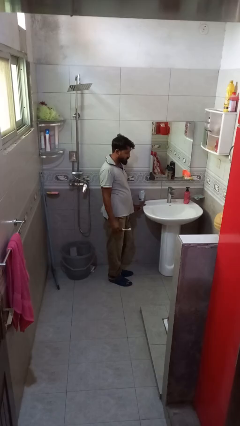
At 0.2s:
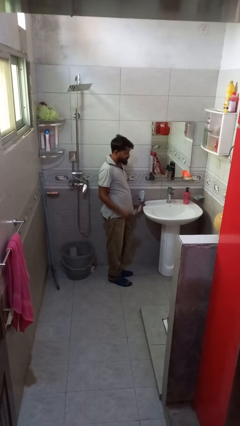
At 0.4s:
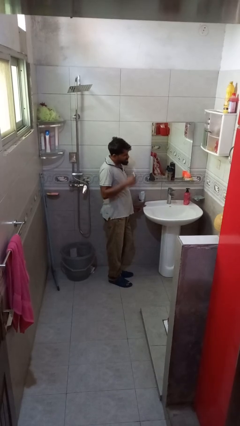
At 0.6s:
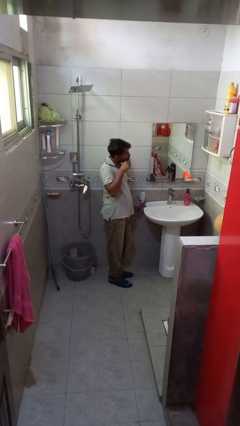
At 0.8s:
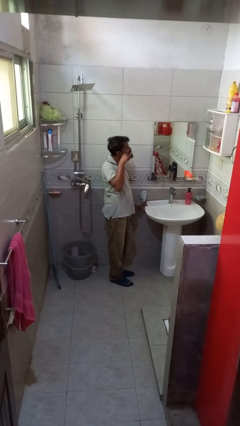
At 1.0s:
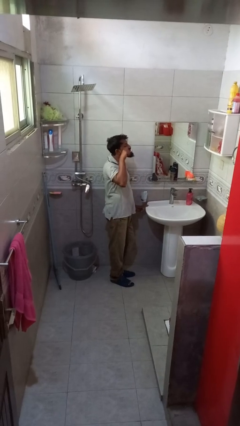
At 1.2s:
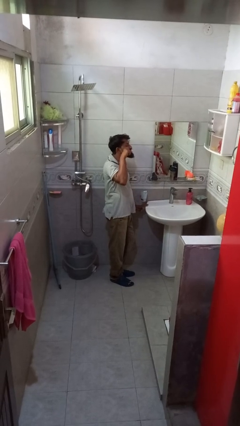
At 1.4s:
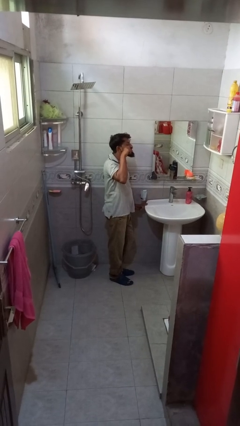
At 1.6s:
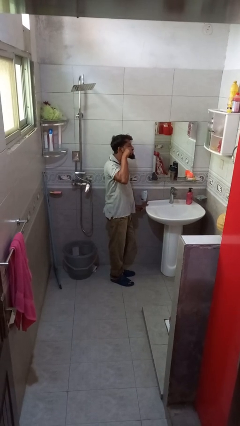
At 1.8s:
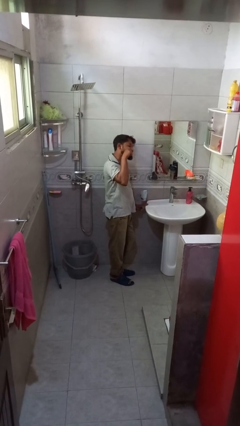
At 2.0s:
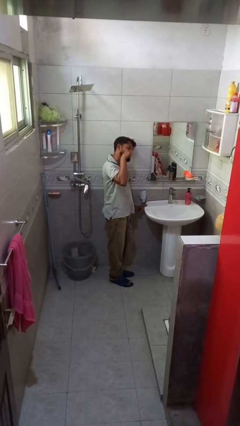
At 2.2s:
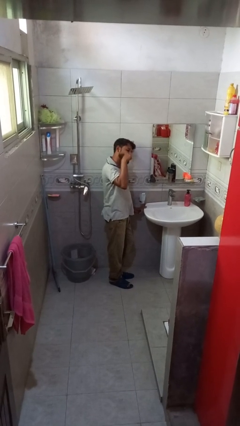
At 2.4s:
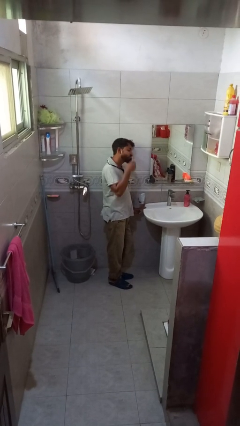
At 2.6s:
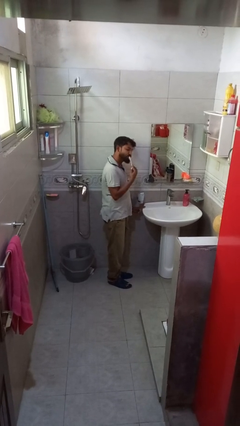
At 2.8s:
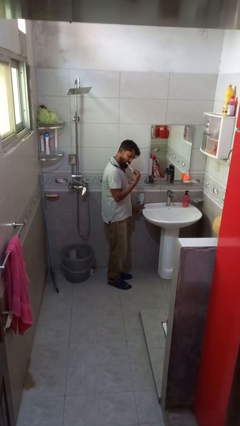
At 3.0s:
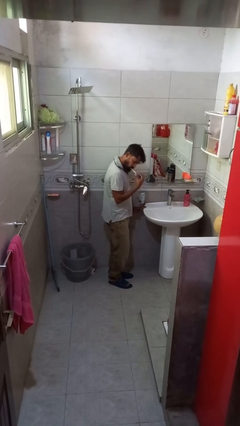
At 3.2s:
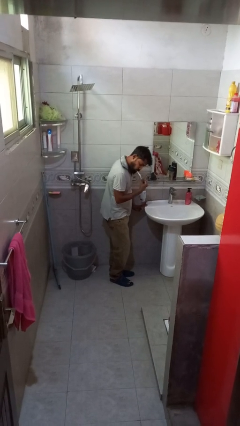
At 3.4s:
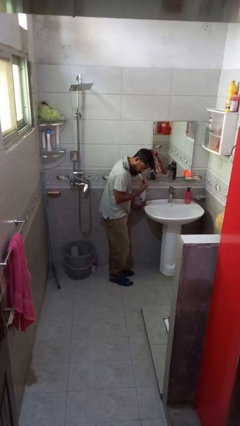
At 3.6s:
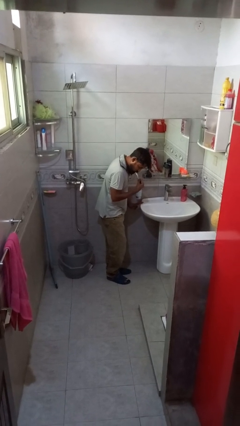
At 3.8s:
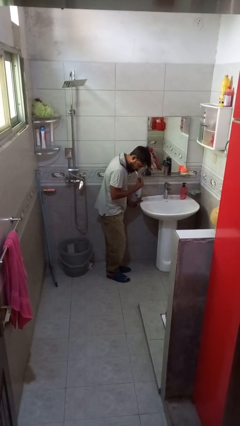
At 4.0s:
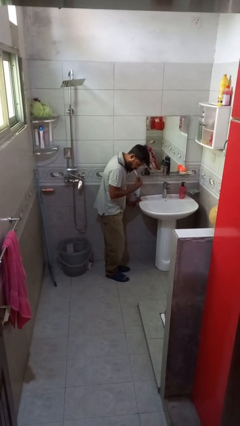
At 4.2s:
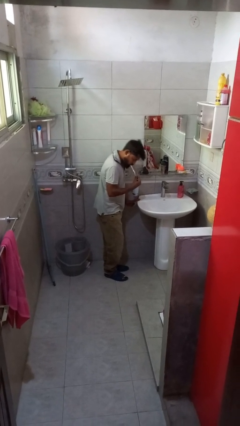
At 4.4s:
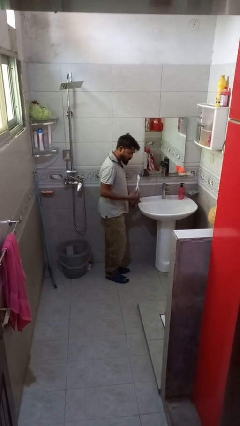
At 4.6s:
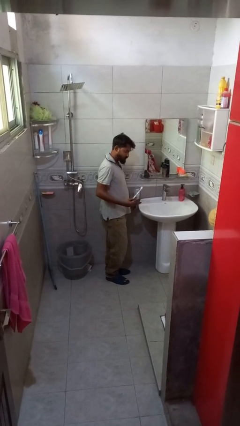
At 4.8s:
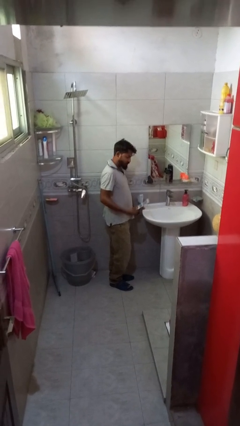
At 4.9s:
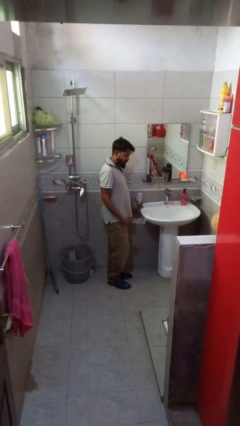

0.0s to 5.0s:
person brushes teeth

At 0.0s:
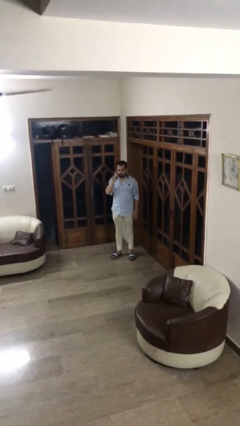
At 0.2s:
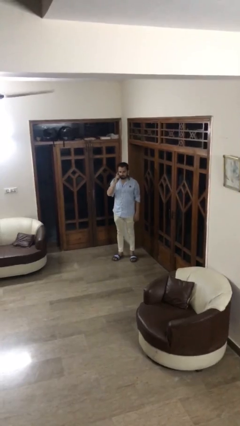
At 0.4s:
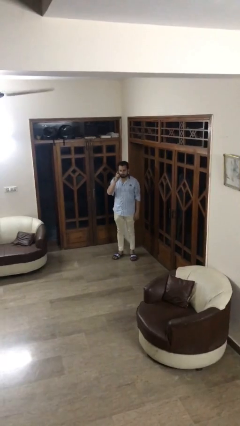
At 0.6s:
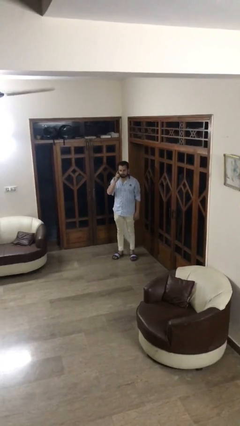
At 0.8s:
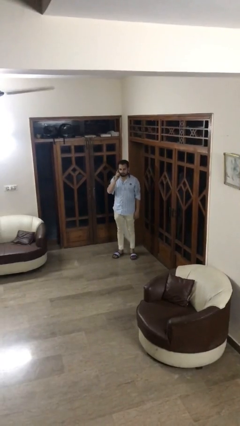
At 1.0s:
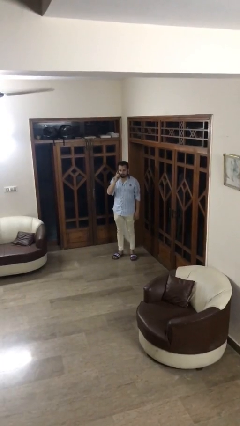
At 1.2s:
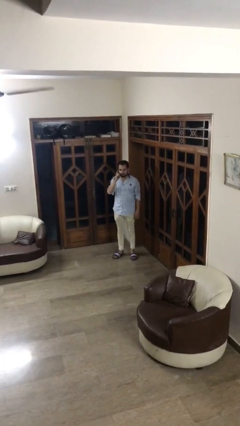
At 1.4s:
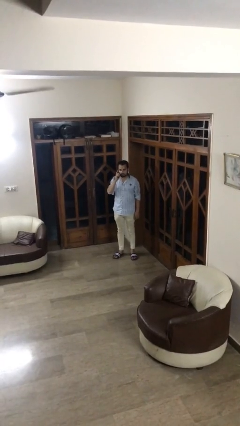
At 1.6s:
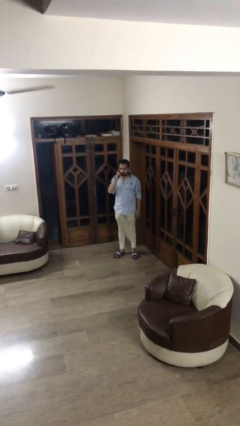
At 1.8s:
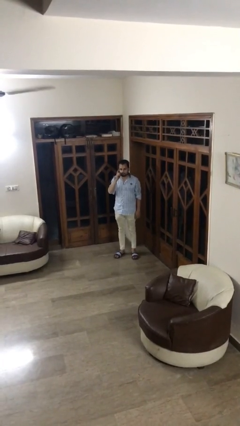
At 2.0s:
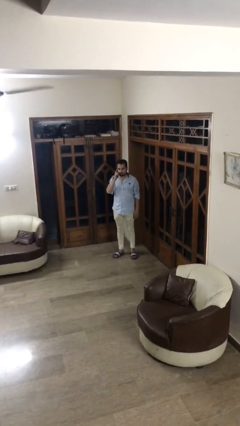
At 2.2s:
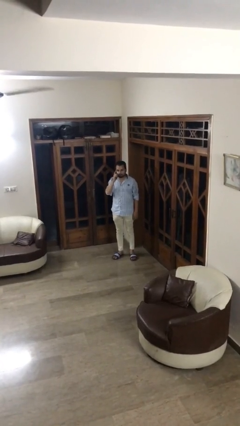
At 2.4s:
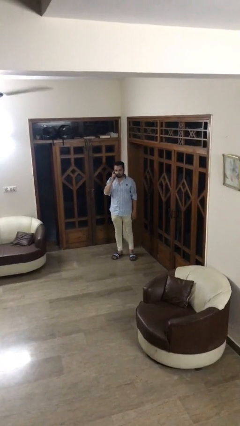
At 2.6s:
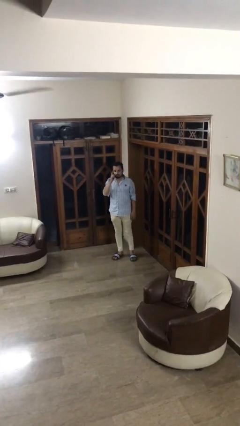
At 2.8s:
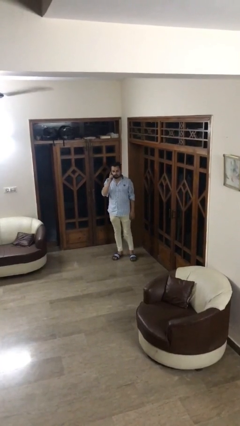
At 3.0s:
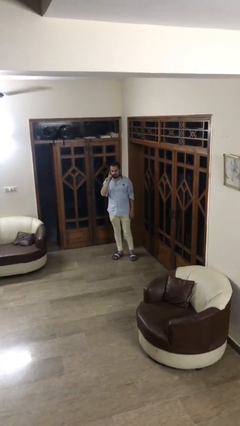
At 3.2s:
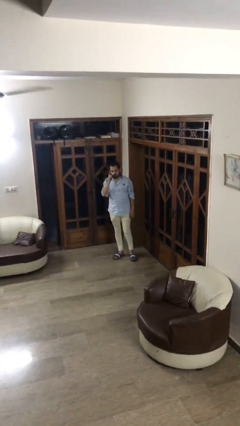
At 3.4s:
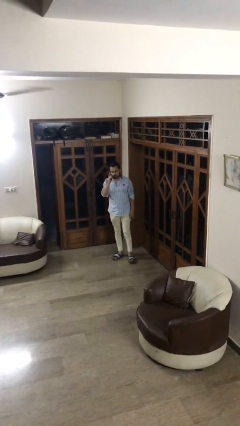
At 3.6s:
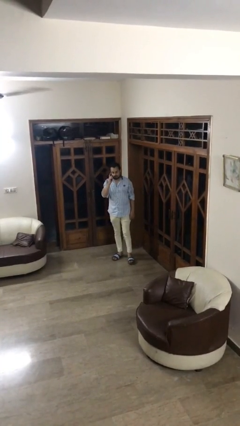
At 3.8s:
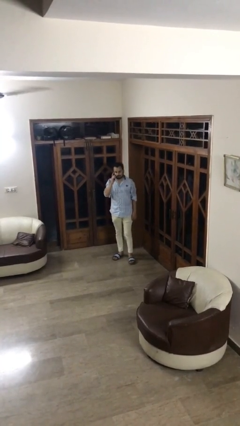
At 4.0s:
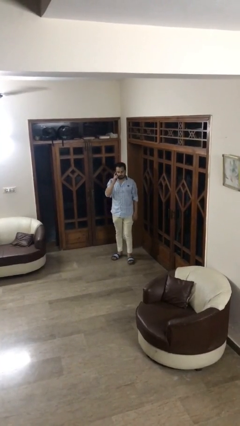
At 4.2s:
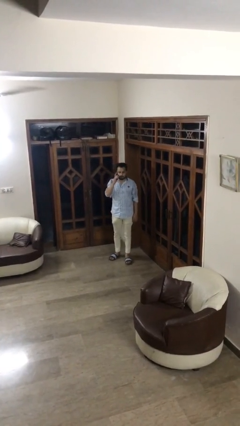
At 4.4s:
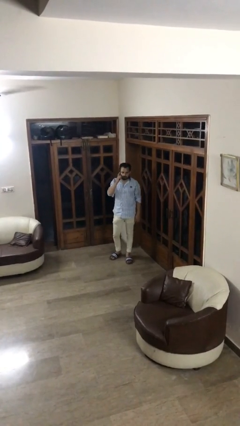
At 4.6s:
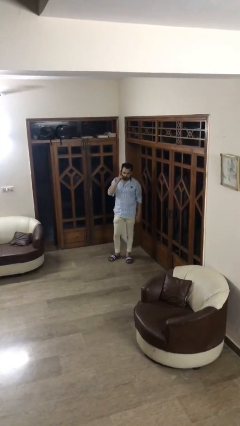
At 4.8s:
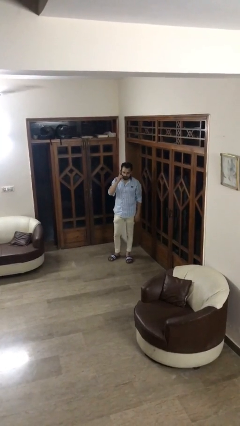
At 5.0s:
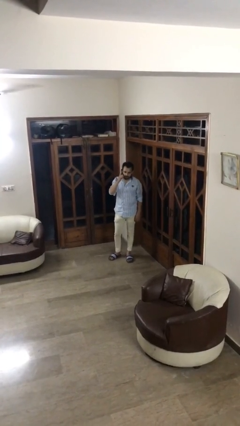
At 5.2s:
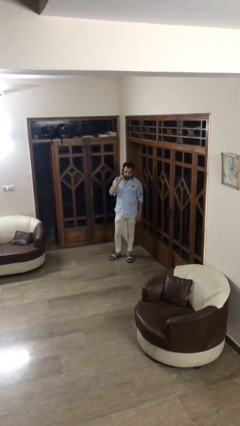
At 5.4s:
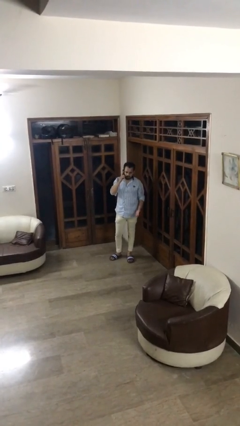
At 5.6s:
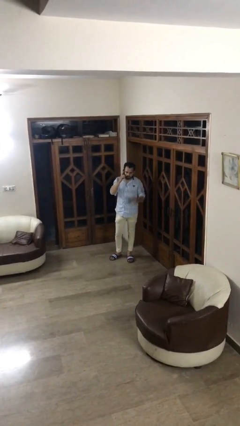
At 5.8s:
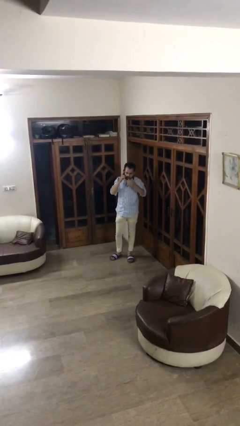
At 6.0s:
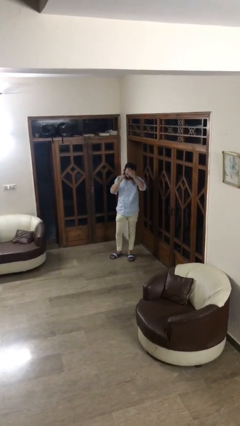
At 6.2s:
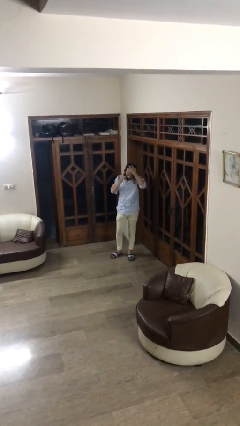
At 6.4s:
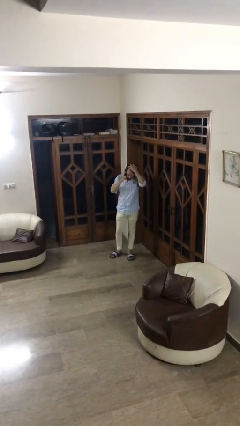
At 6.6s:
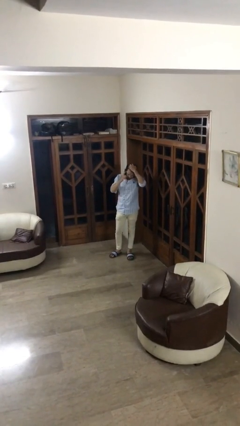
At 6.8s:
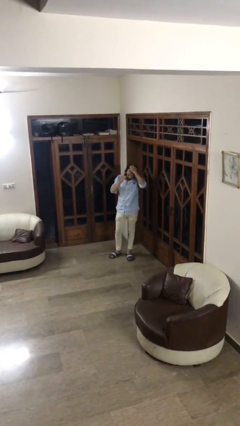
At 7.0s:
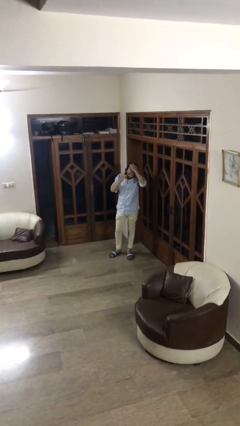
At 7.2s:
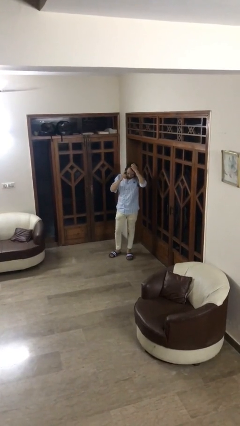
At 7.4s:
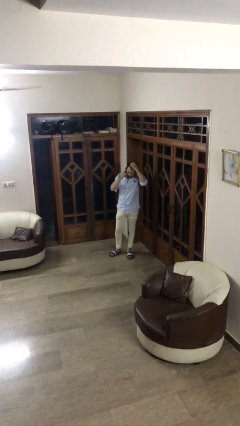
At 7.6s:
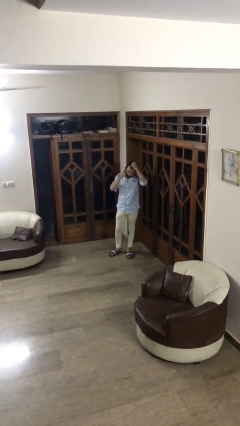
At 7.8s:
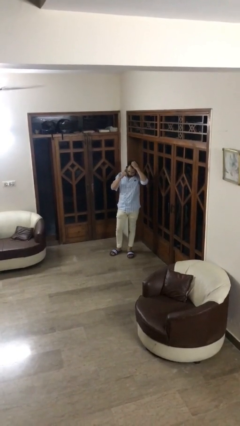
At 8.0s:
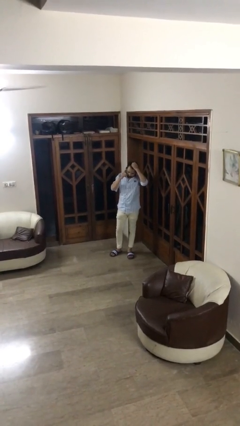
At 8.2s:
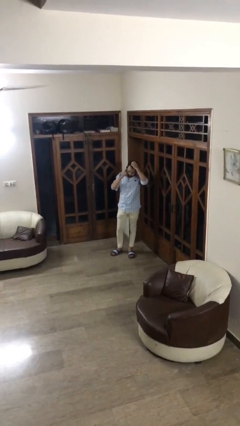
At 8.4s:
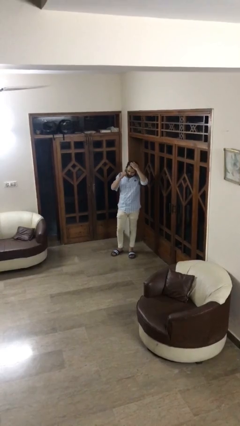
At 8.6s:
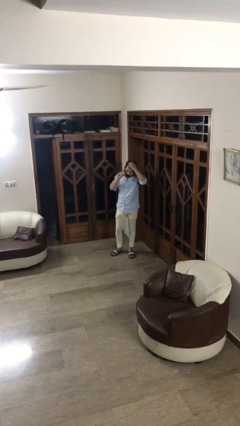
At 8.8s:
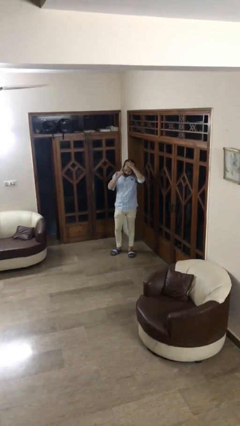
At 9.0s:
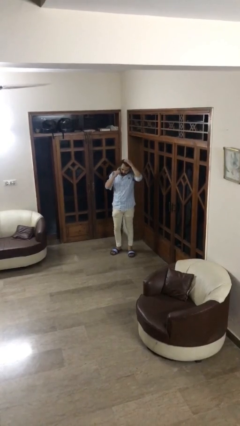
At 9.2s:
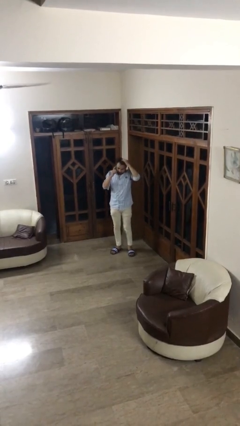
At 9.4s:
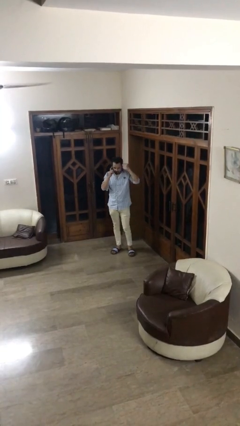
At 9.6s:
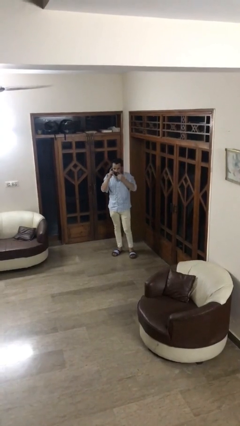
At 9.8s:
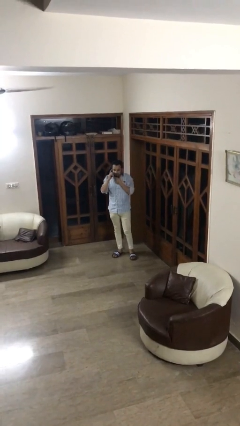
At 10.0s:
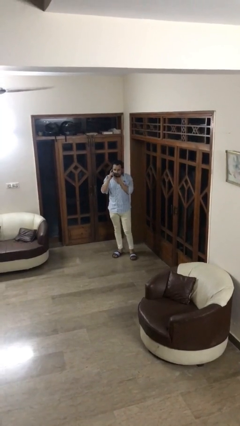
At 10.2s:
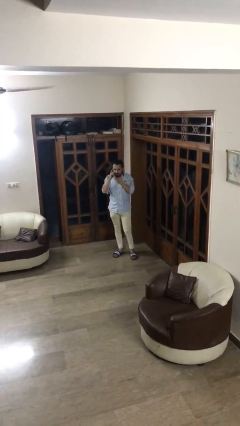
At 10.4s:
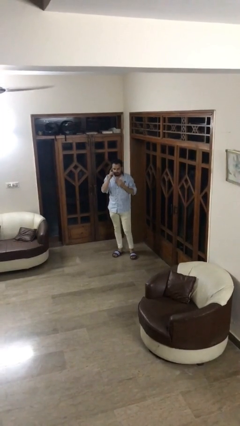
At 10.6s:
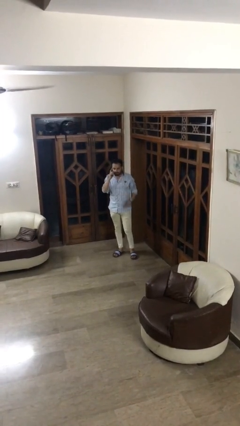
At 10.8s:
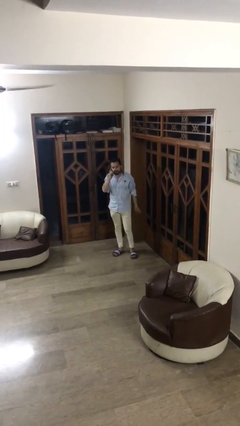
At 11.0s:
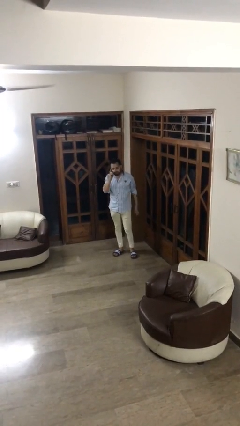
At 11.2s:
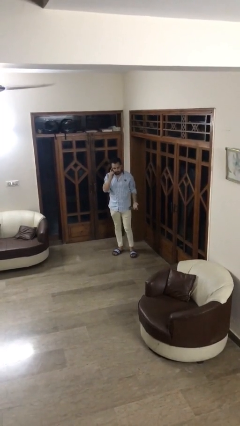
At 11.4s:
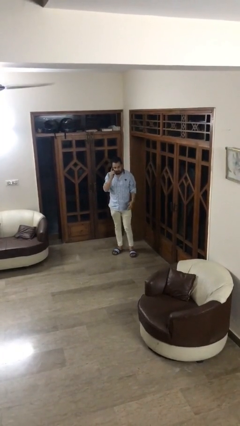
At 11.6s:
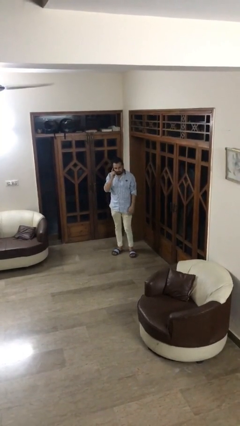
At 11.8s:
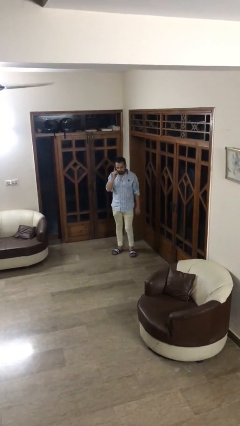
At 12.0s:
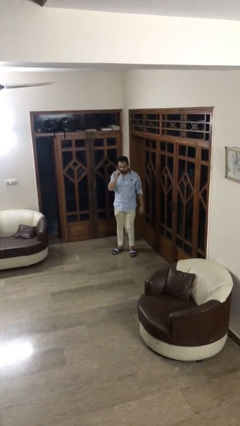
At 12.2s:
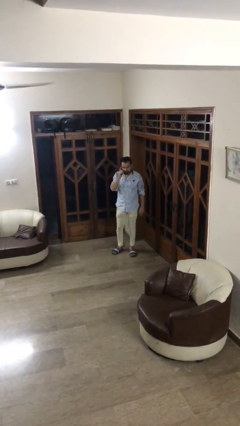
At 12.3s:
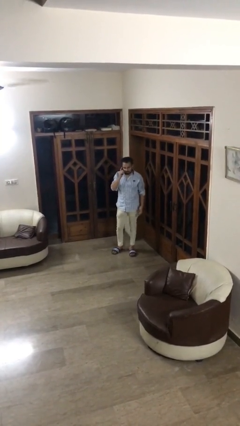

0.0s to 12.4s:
person talks on phone

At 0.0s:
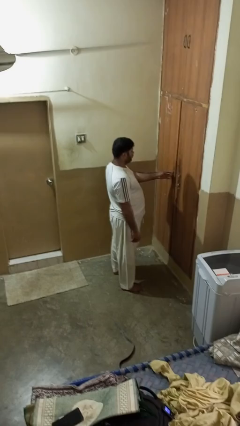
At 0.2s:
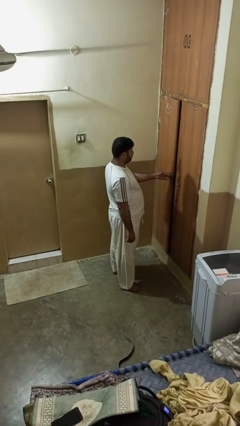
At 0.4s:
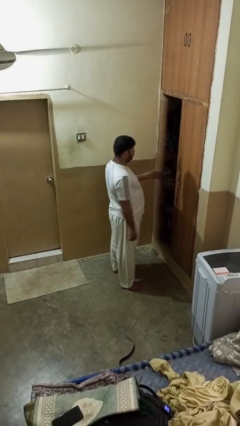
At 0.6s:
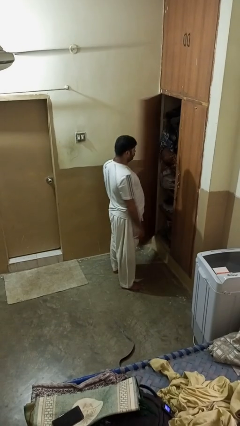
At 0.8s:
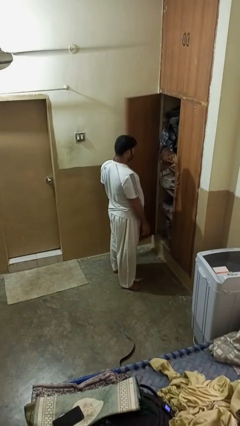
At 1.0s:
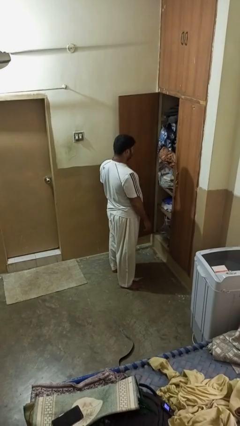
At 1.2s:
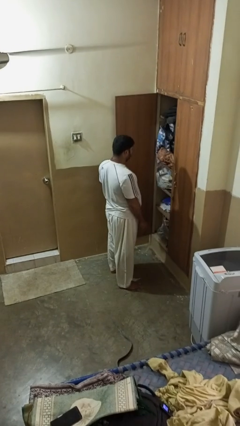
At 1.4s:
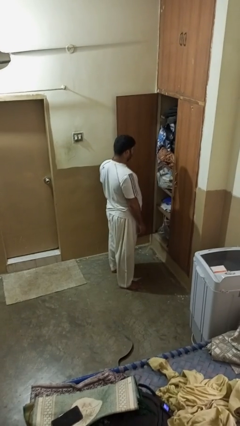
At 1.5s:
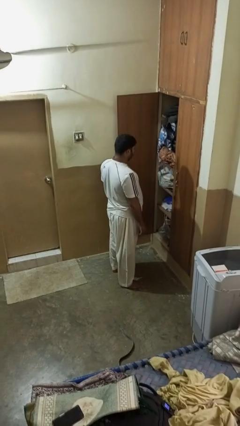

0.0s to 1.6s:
person opens closet door
